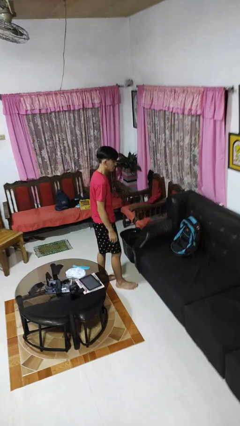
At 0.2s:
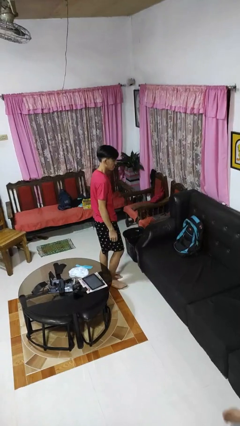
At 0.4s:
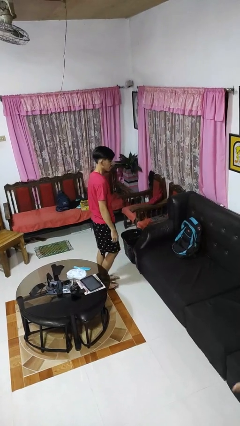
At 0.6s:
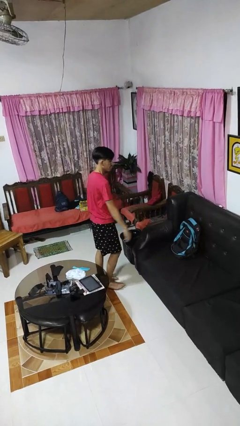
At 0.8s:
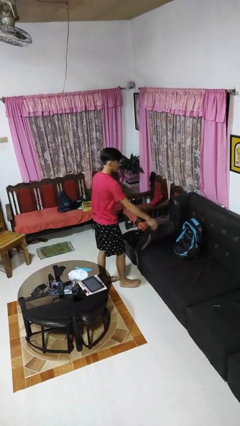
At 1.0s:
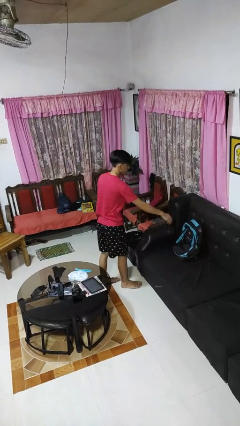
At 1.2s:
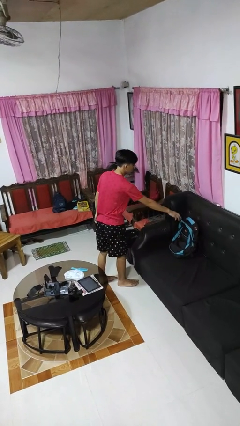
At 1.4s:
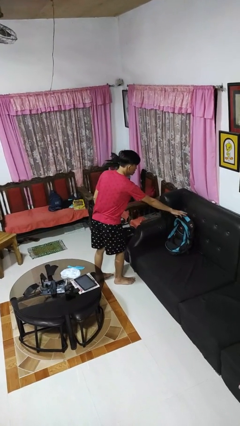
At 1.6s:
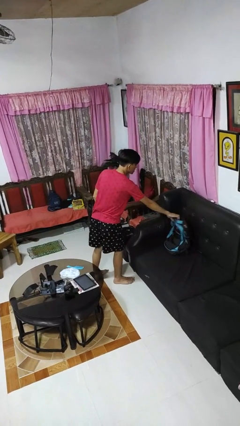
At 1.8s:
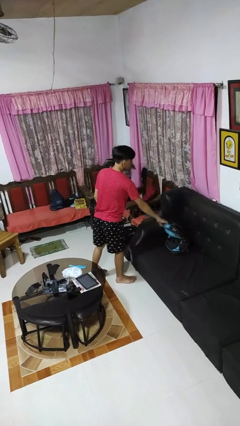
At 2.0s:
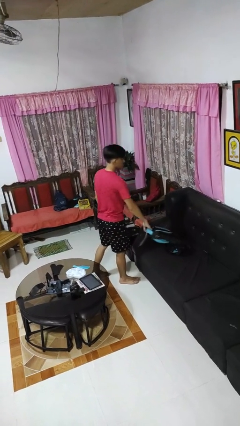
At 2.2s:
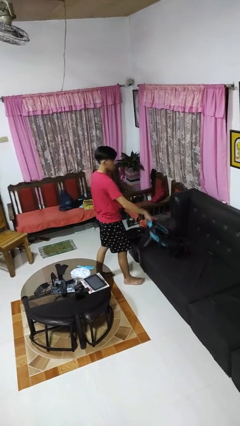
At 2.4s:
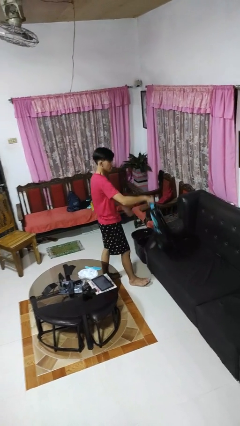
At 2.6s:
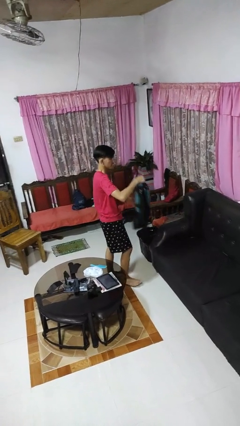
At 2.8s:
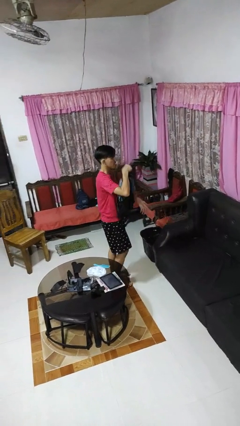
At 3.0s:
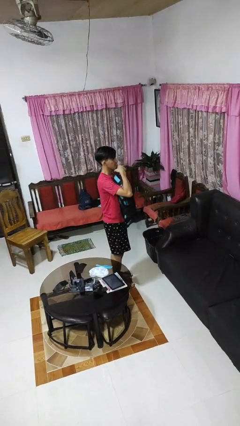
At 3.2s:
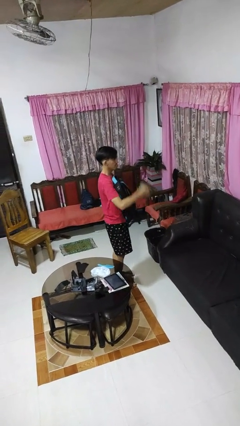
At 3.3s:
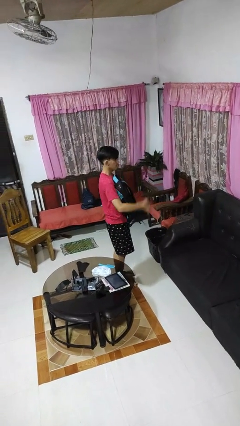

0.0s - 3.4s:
person picks up object from couch

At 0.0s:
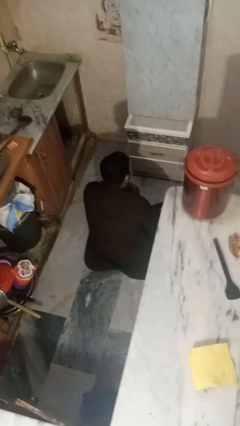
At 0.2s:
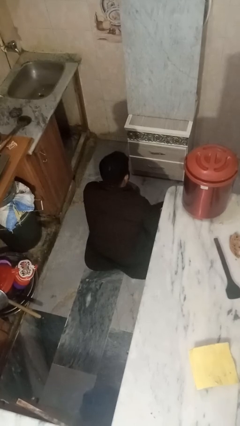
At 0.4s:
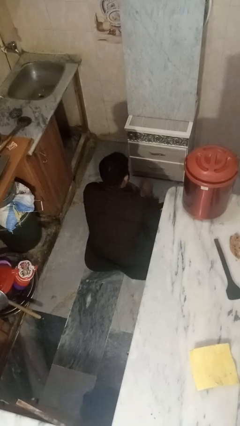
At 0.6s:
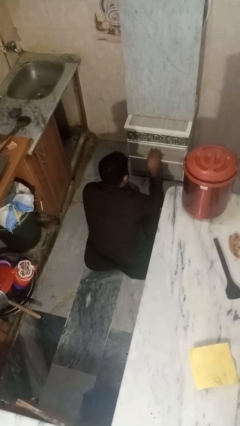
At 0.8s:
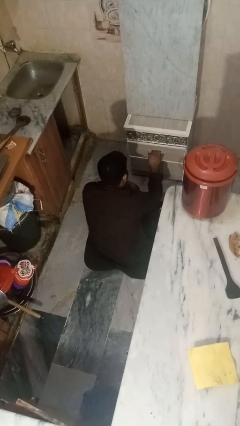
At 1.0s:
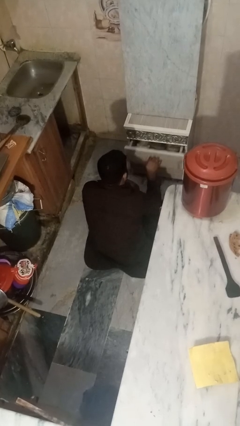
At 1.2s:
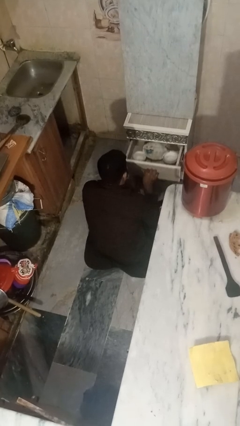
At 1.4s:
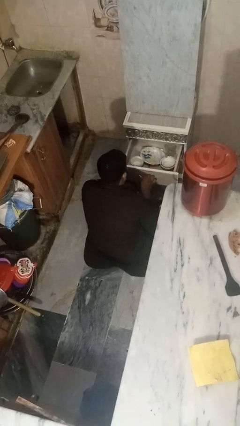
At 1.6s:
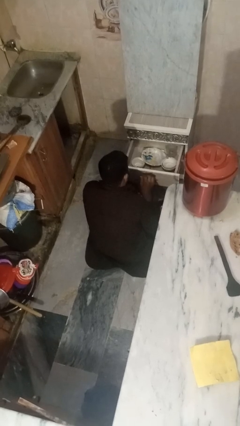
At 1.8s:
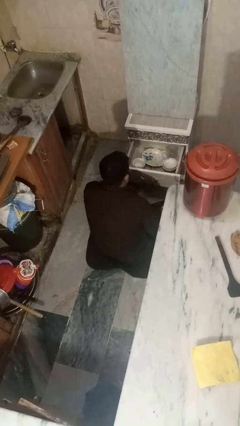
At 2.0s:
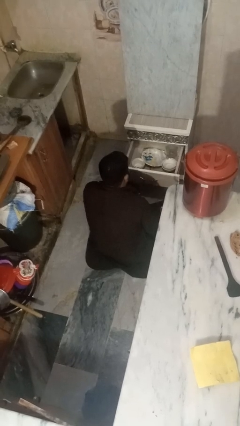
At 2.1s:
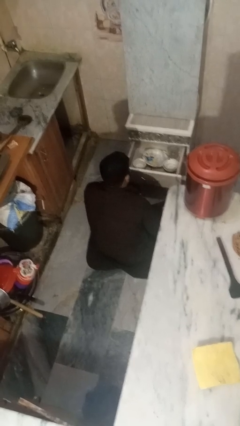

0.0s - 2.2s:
person opens kitchen drawer

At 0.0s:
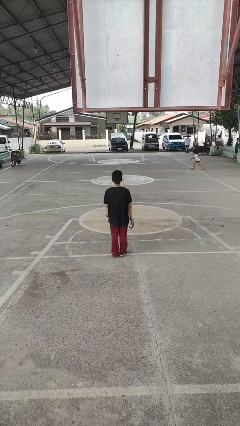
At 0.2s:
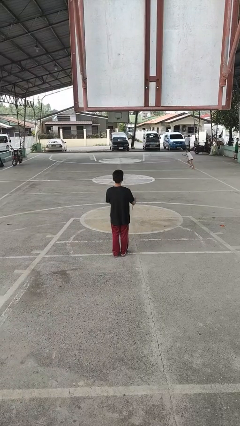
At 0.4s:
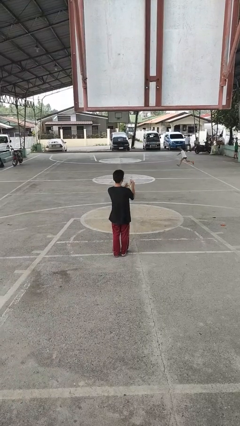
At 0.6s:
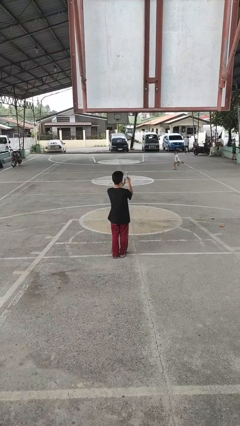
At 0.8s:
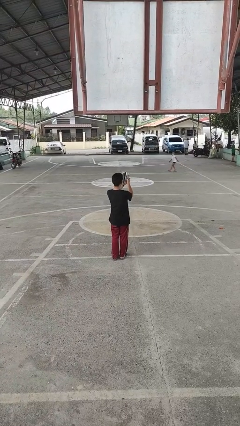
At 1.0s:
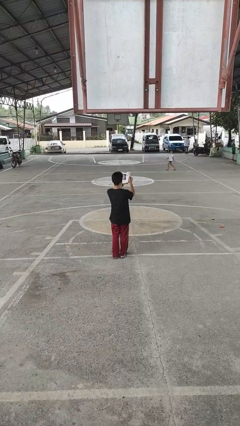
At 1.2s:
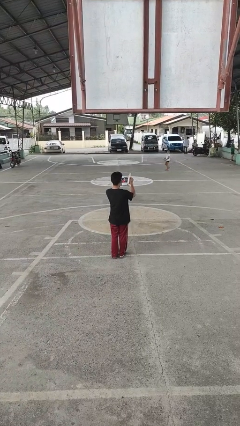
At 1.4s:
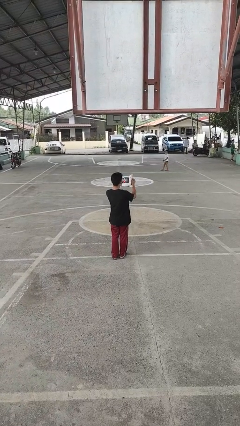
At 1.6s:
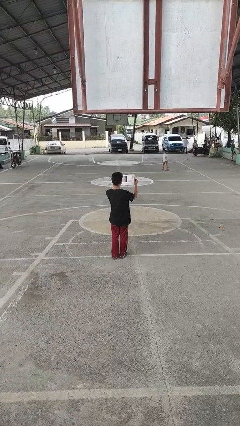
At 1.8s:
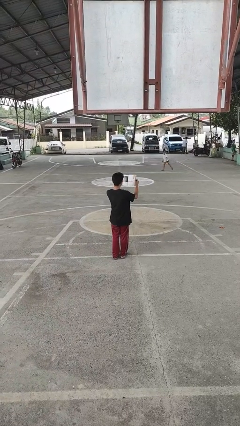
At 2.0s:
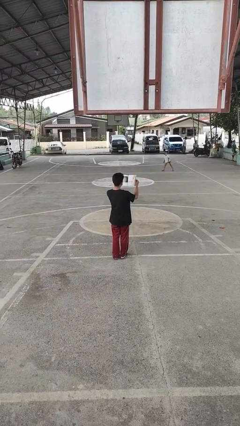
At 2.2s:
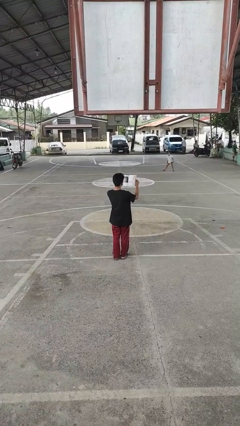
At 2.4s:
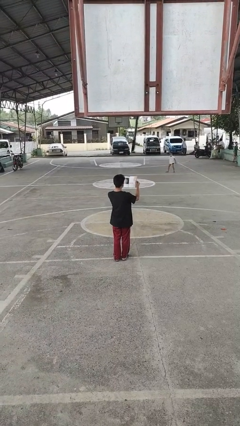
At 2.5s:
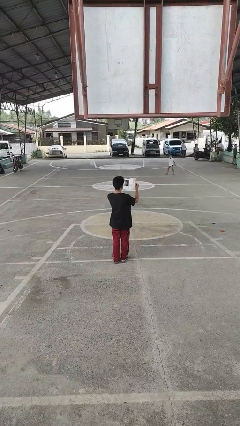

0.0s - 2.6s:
person reads magazine

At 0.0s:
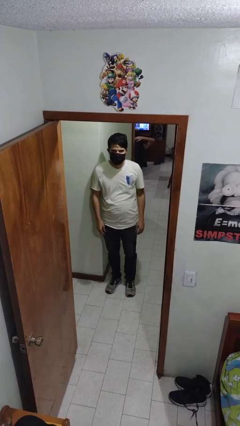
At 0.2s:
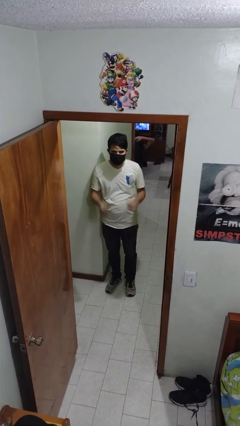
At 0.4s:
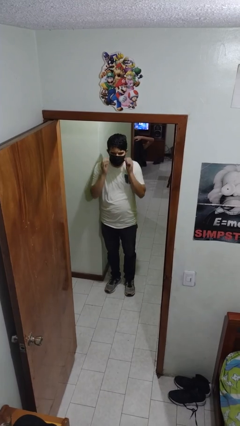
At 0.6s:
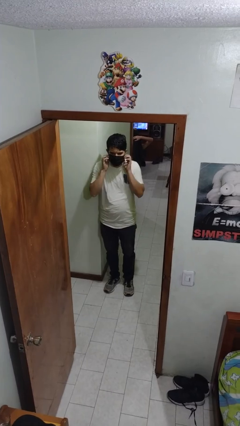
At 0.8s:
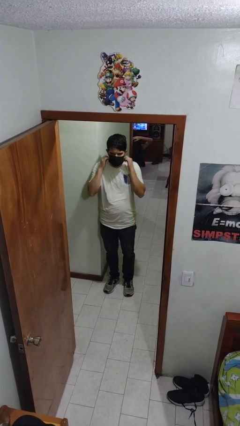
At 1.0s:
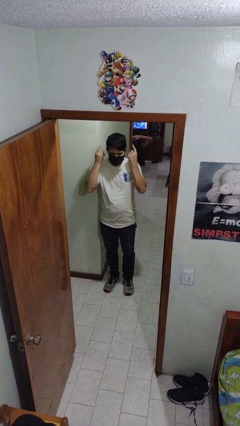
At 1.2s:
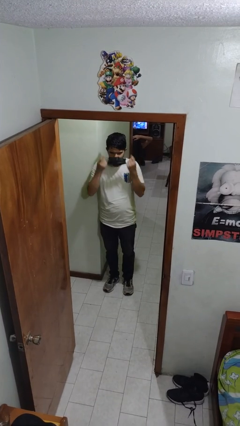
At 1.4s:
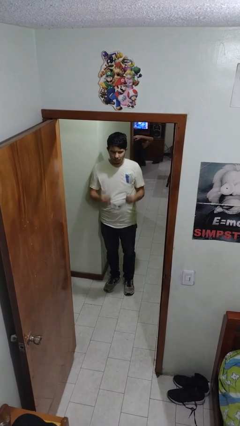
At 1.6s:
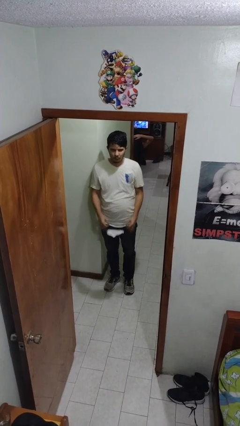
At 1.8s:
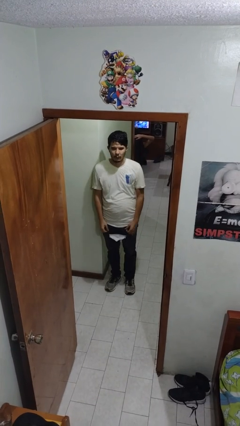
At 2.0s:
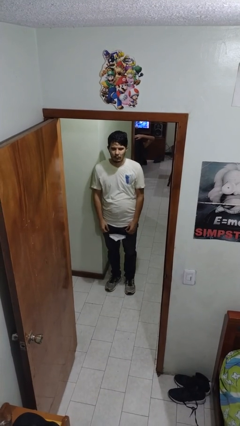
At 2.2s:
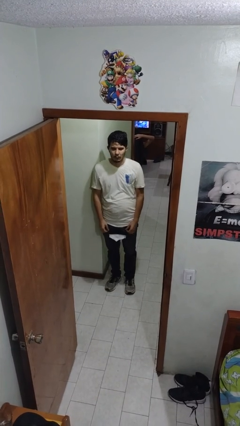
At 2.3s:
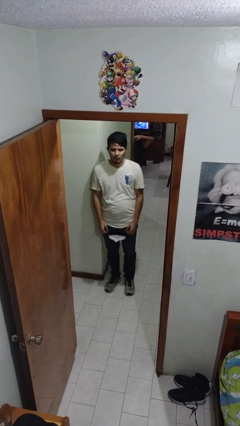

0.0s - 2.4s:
person takes off facemask

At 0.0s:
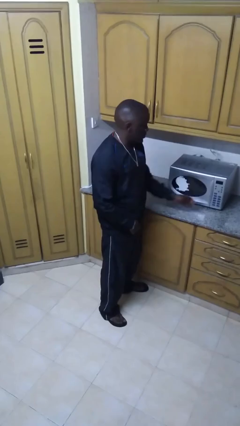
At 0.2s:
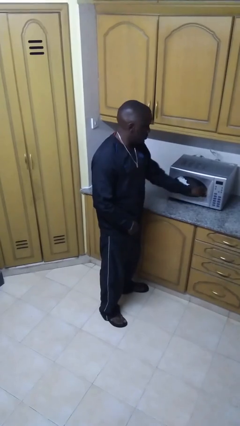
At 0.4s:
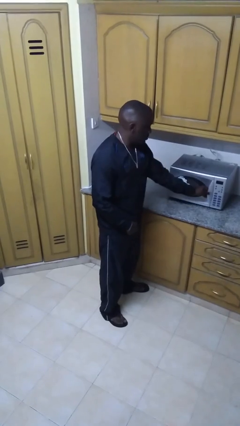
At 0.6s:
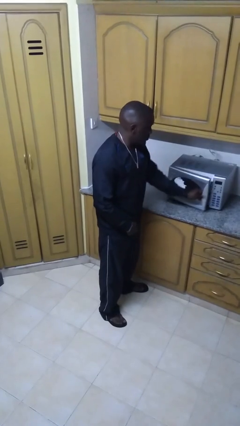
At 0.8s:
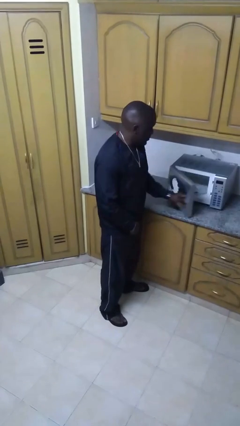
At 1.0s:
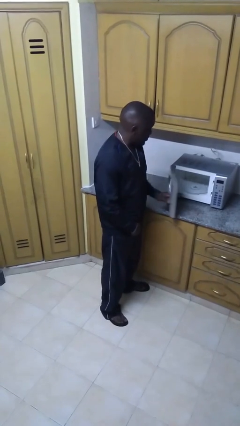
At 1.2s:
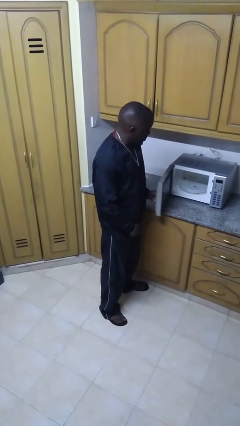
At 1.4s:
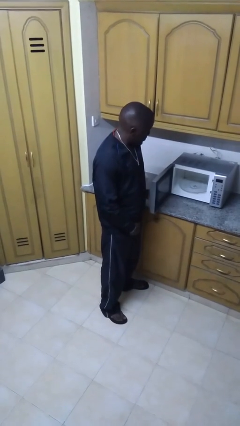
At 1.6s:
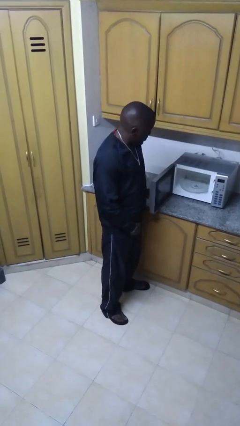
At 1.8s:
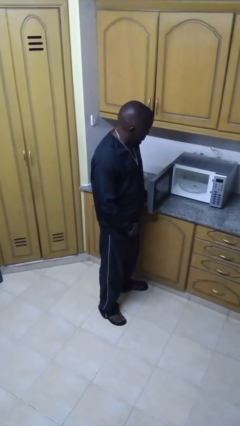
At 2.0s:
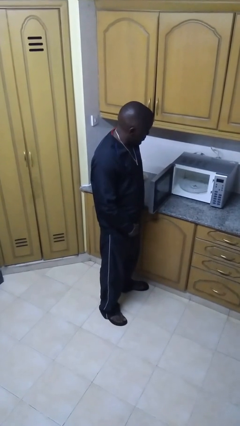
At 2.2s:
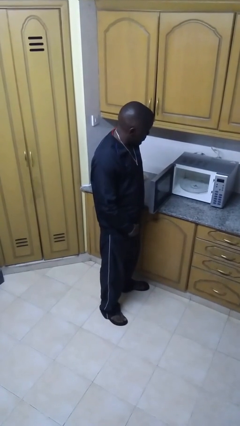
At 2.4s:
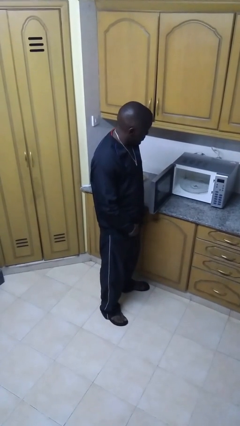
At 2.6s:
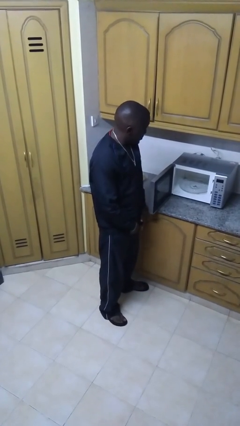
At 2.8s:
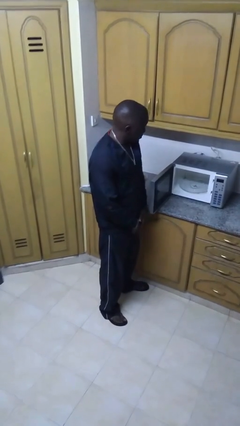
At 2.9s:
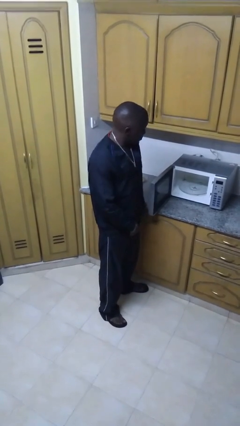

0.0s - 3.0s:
person opens microwave

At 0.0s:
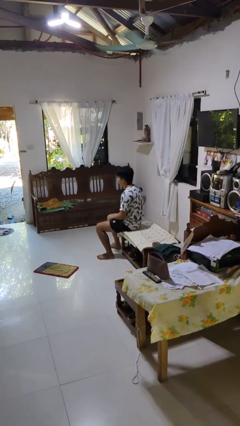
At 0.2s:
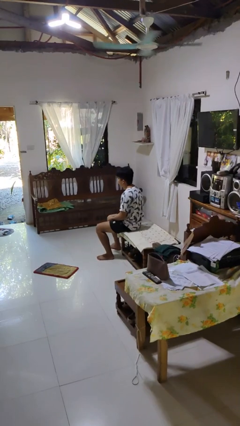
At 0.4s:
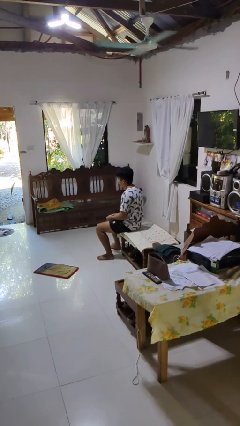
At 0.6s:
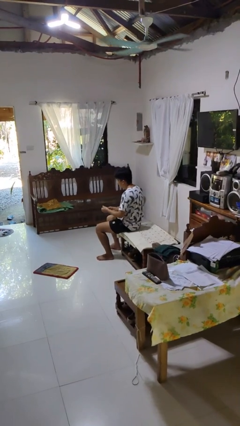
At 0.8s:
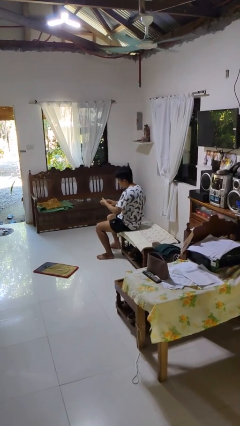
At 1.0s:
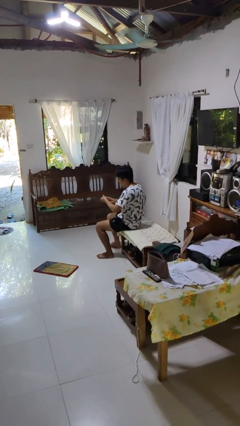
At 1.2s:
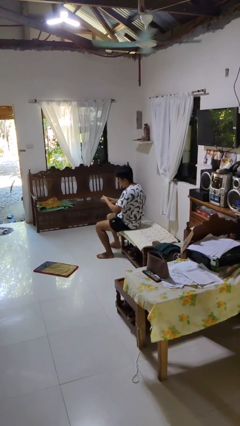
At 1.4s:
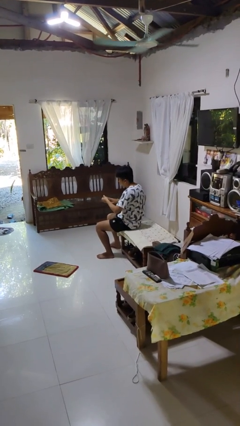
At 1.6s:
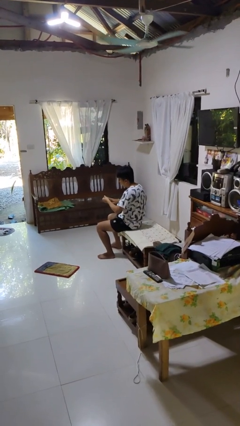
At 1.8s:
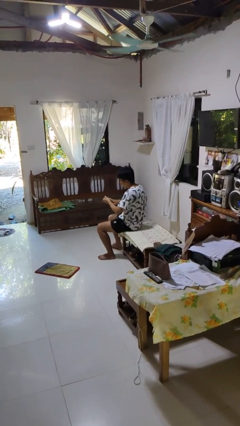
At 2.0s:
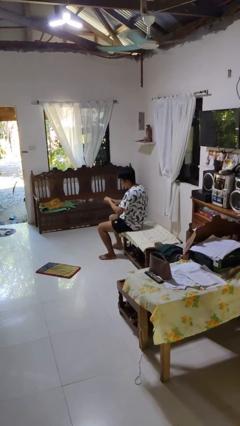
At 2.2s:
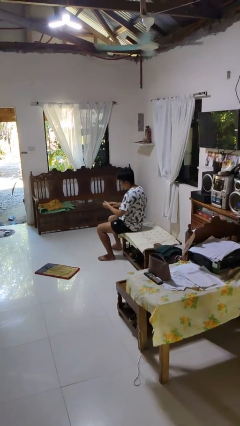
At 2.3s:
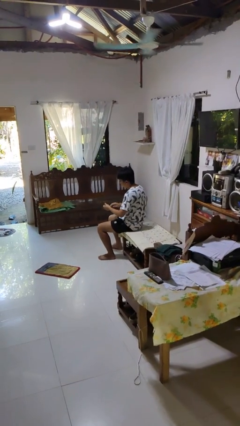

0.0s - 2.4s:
person clips fingernails

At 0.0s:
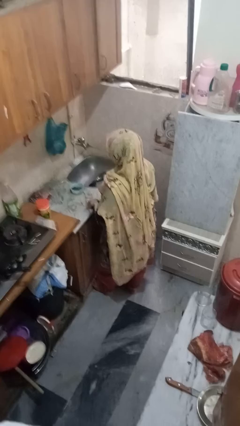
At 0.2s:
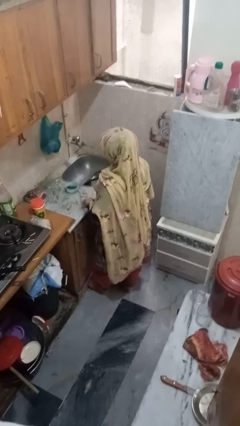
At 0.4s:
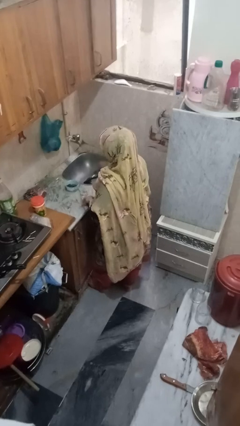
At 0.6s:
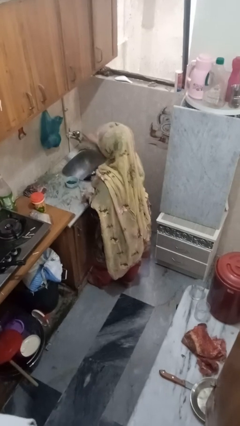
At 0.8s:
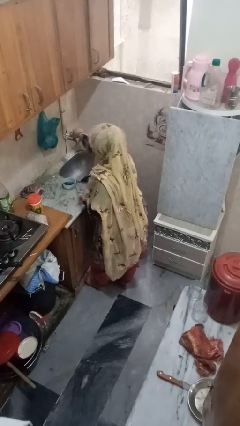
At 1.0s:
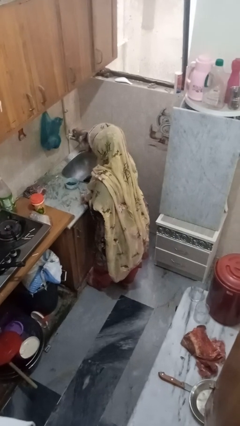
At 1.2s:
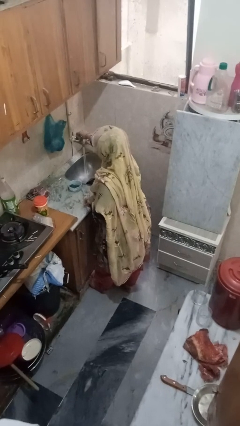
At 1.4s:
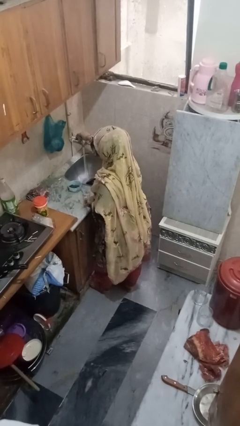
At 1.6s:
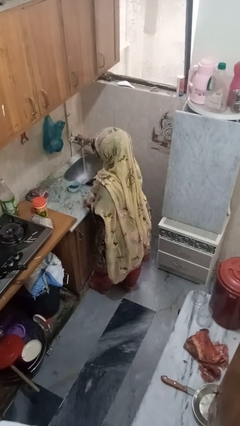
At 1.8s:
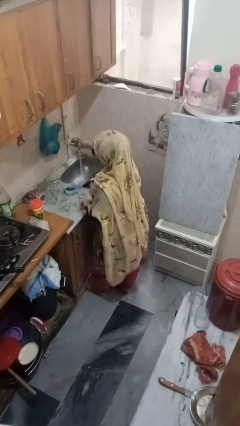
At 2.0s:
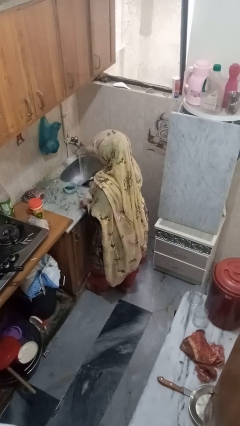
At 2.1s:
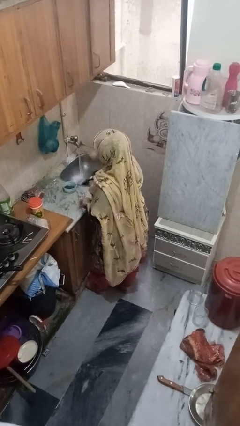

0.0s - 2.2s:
person turns on faucet
